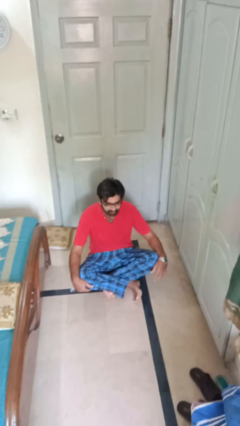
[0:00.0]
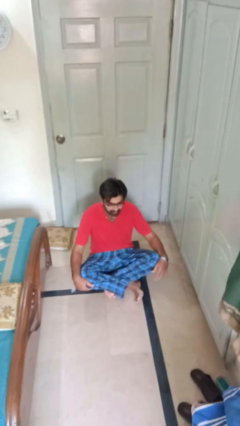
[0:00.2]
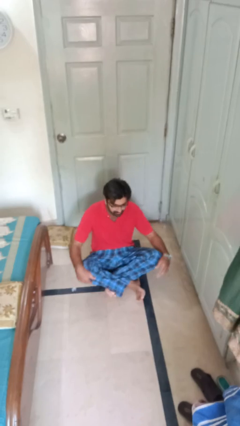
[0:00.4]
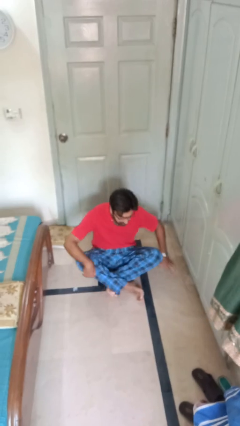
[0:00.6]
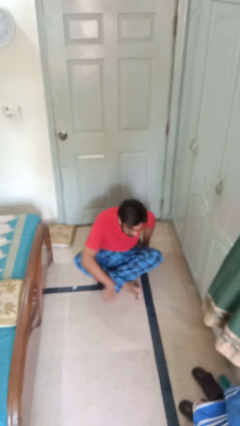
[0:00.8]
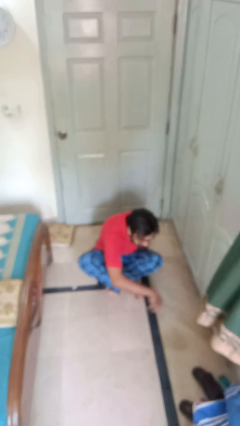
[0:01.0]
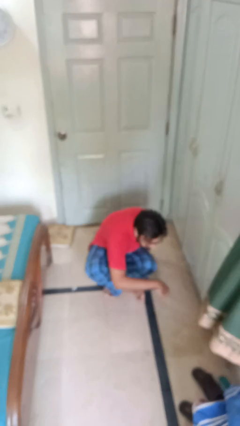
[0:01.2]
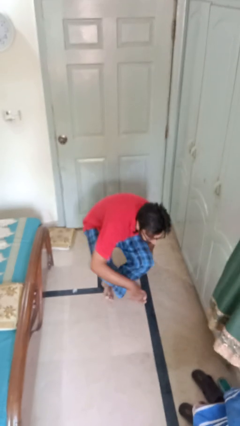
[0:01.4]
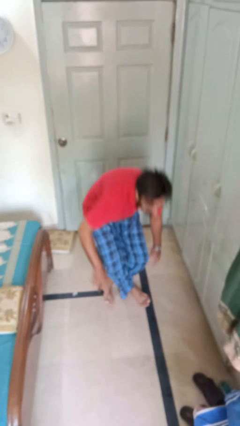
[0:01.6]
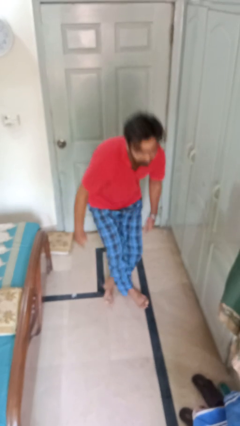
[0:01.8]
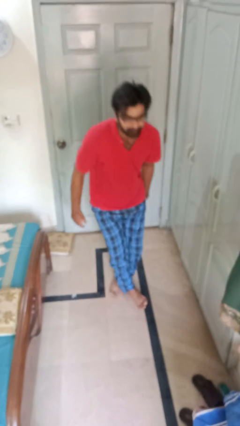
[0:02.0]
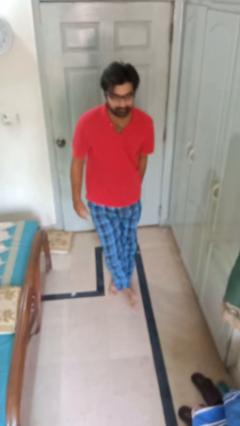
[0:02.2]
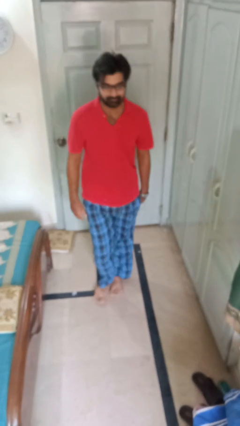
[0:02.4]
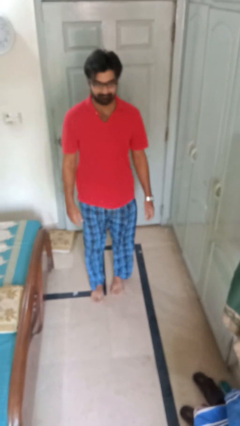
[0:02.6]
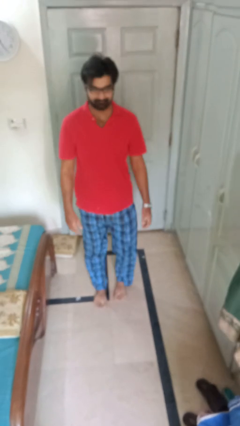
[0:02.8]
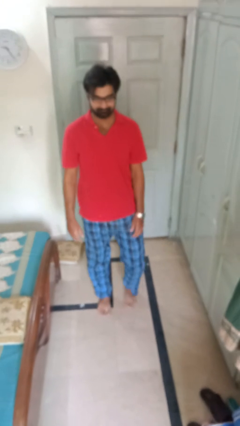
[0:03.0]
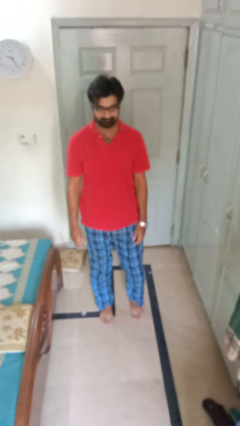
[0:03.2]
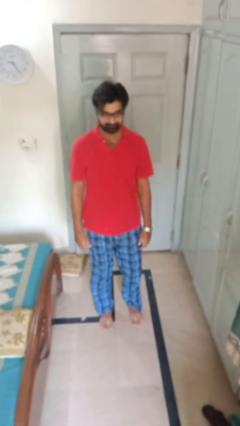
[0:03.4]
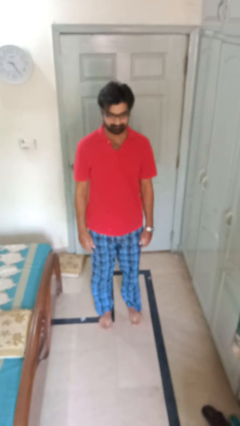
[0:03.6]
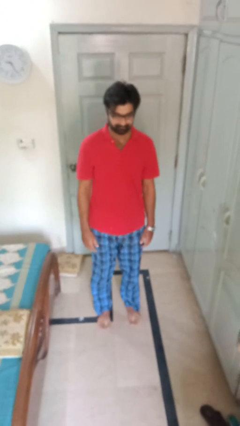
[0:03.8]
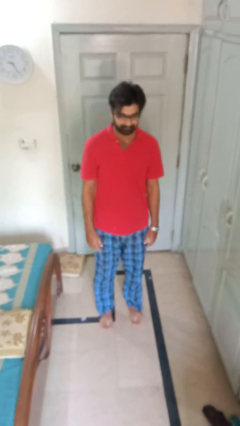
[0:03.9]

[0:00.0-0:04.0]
person stands up from floor

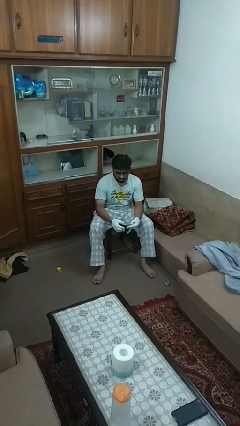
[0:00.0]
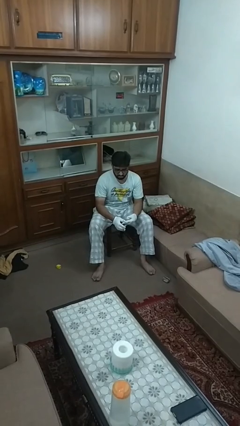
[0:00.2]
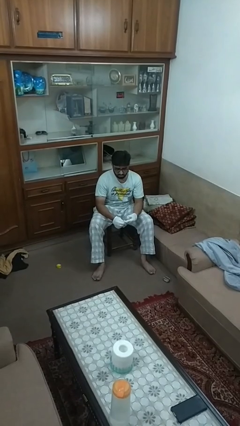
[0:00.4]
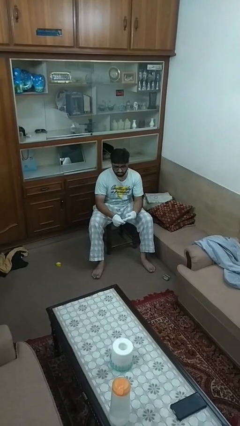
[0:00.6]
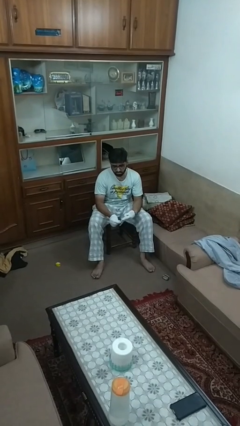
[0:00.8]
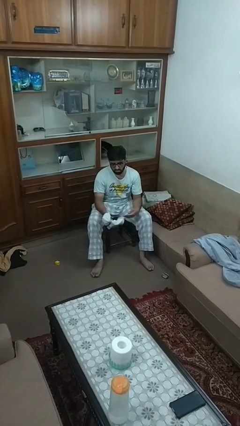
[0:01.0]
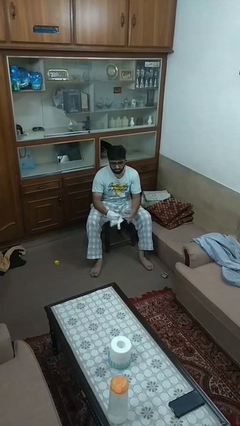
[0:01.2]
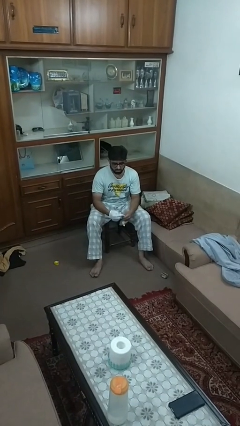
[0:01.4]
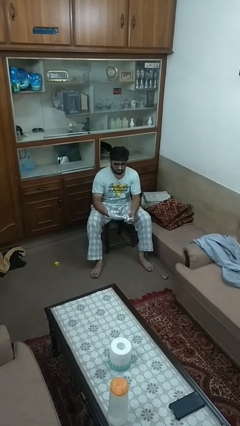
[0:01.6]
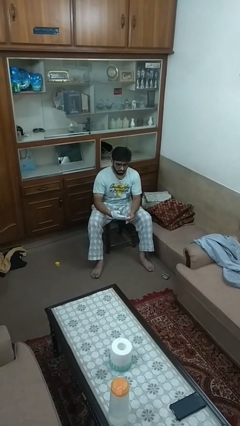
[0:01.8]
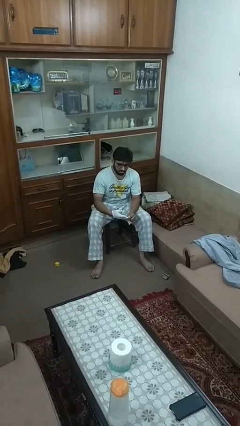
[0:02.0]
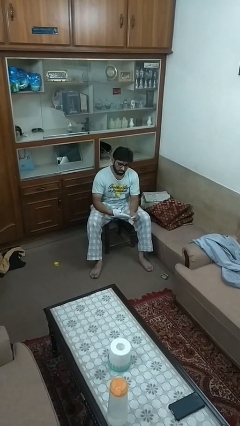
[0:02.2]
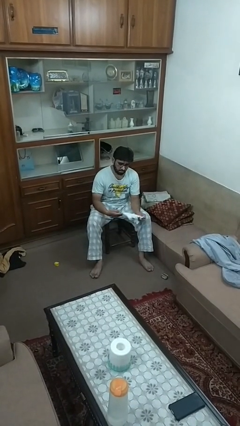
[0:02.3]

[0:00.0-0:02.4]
person takes off gloves

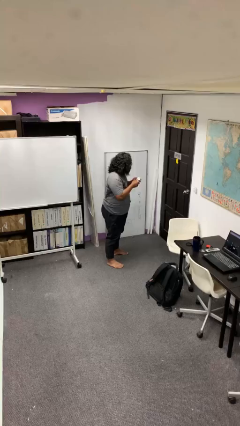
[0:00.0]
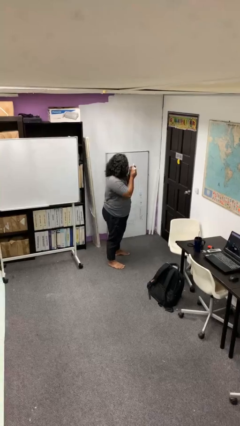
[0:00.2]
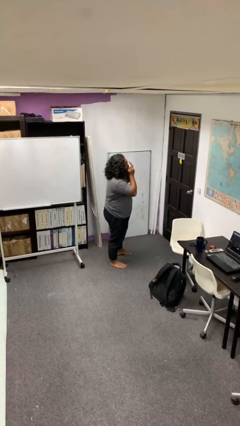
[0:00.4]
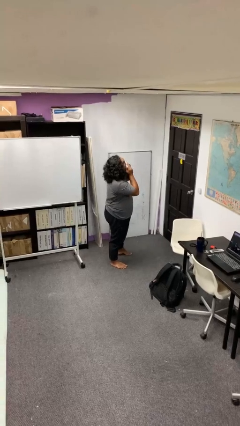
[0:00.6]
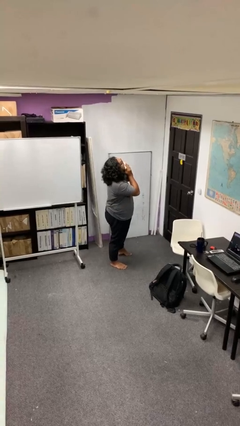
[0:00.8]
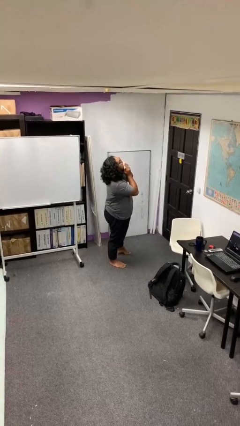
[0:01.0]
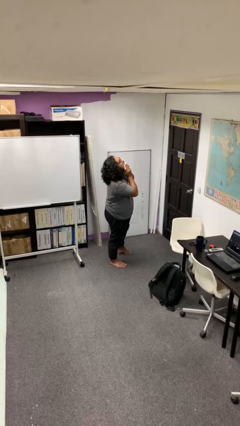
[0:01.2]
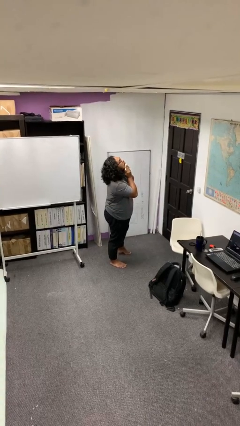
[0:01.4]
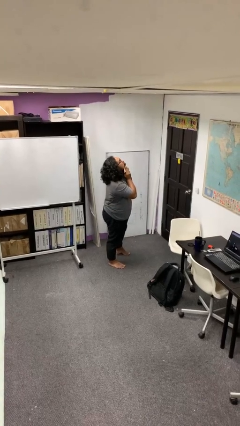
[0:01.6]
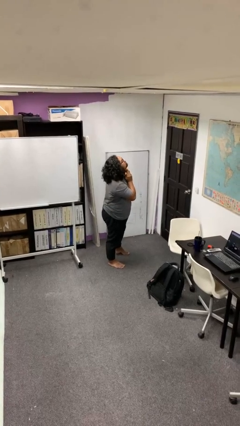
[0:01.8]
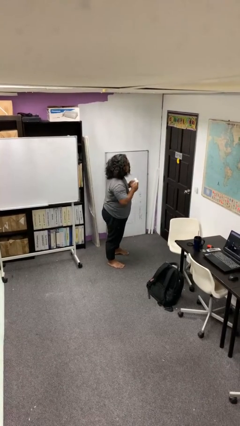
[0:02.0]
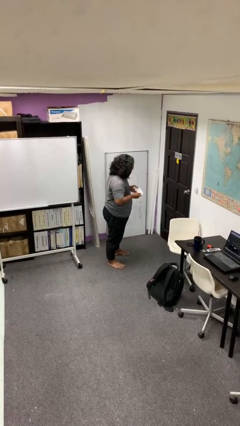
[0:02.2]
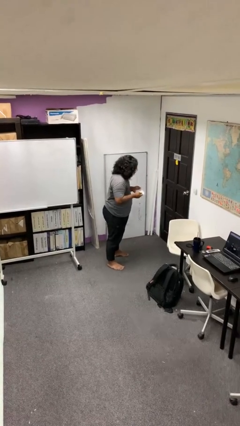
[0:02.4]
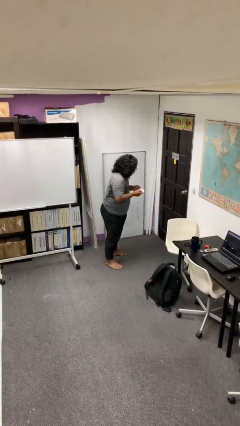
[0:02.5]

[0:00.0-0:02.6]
person wipes mouth with napkin

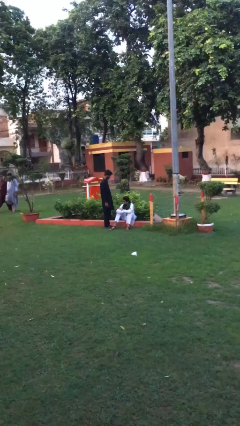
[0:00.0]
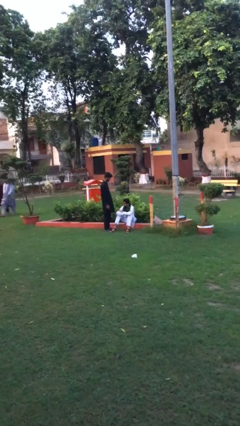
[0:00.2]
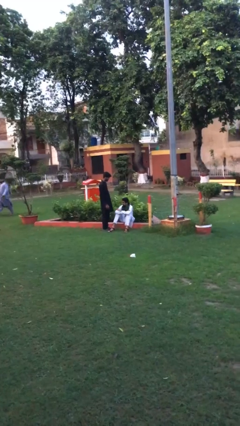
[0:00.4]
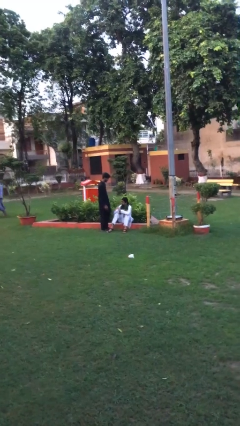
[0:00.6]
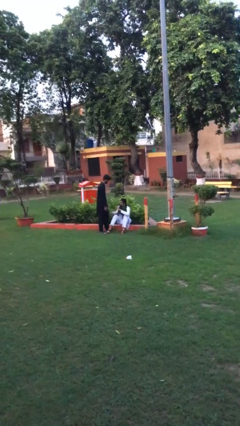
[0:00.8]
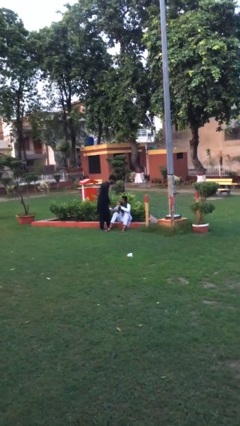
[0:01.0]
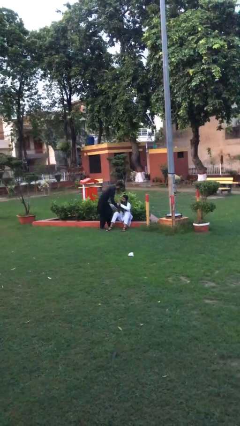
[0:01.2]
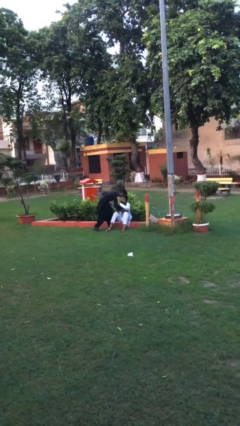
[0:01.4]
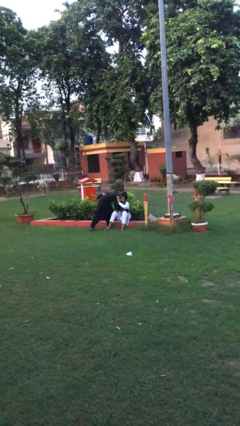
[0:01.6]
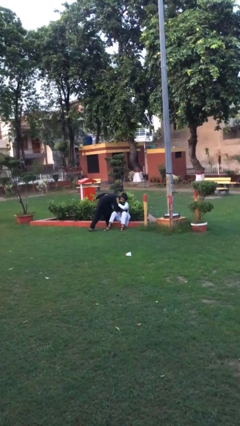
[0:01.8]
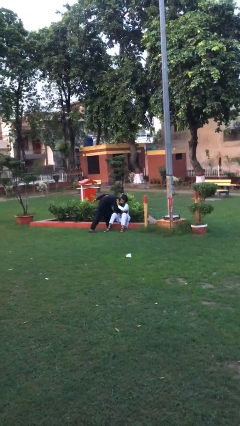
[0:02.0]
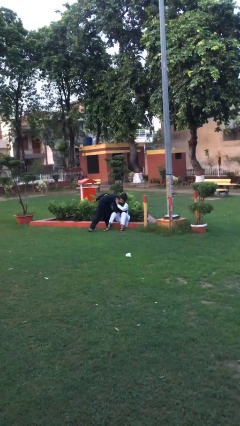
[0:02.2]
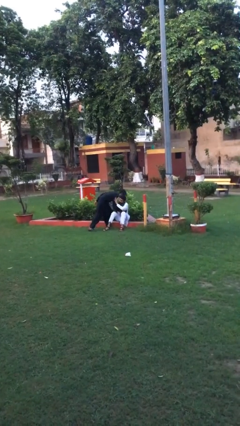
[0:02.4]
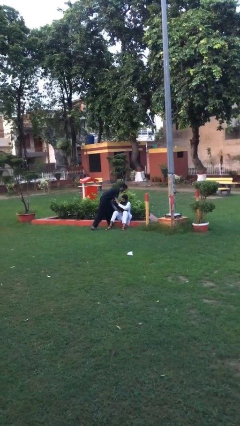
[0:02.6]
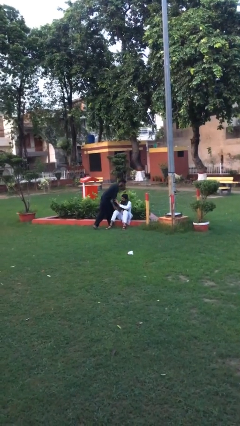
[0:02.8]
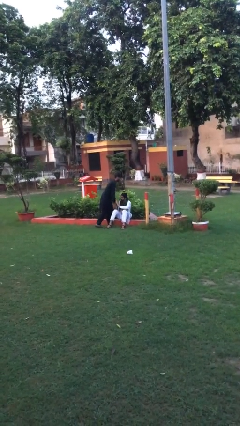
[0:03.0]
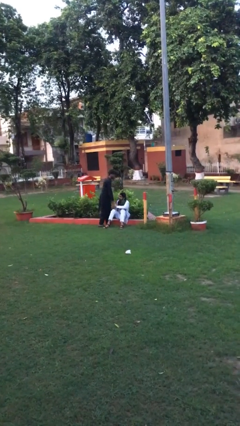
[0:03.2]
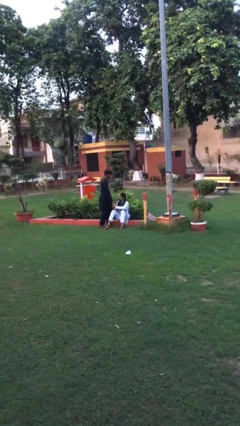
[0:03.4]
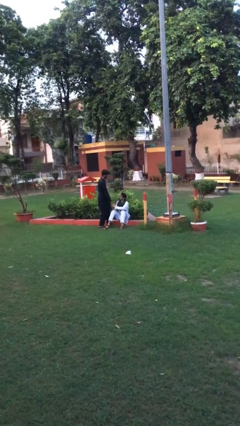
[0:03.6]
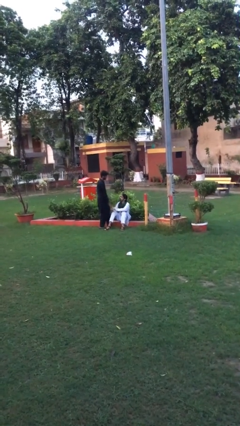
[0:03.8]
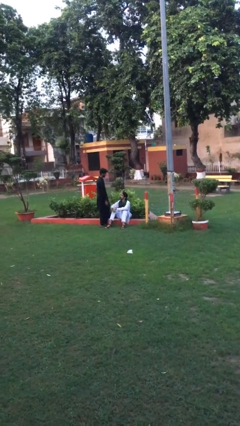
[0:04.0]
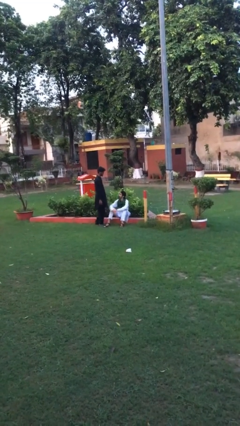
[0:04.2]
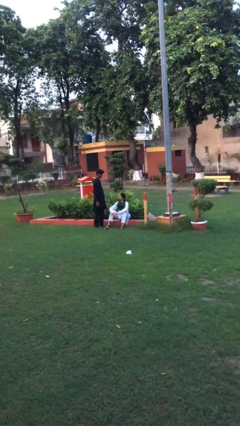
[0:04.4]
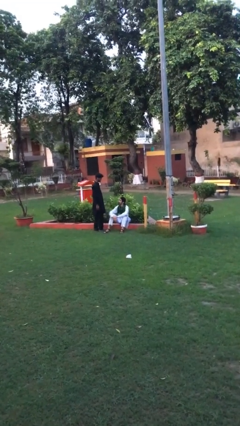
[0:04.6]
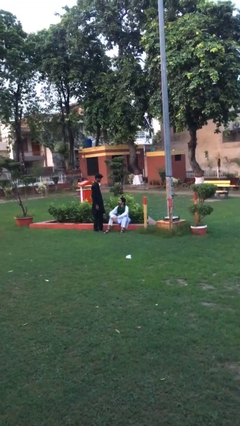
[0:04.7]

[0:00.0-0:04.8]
person embraces person

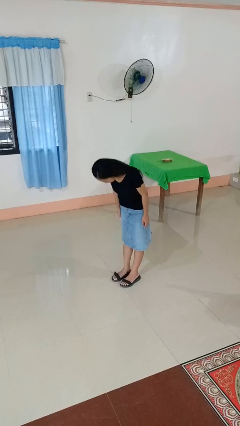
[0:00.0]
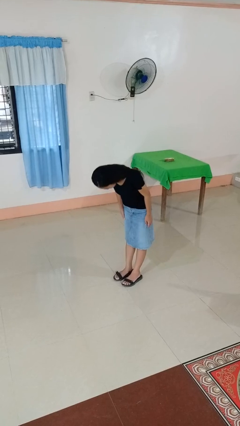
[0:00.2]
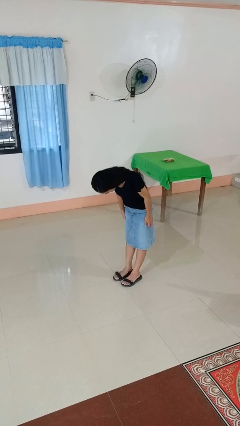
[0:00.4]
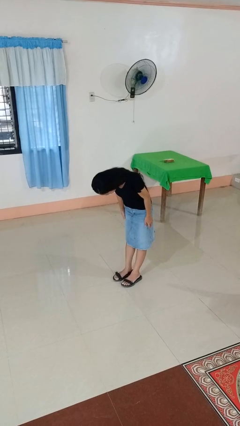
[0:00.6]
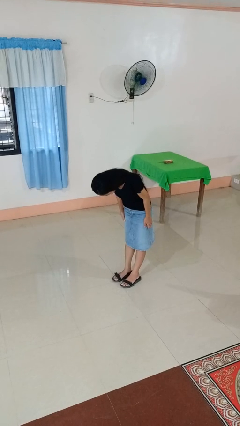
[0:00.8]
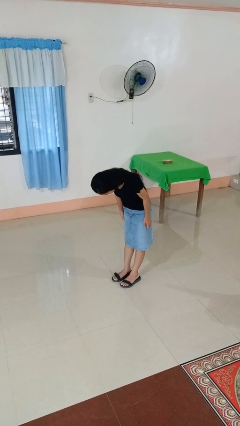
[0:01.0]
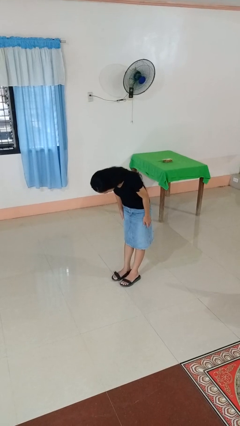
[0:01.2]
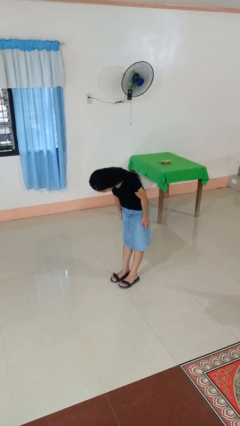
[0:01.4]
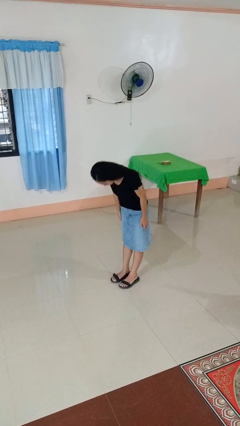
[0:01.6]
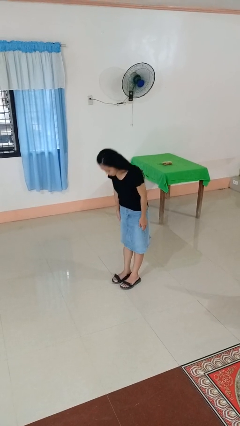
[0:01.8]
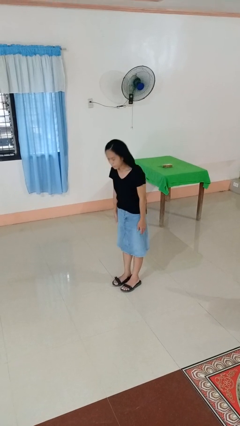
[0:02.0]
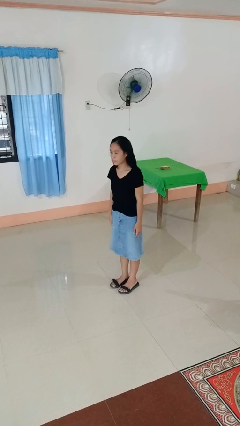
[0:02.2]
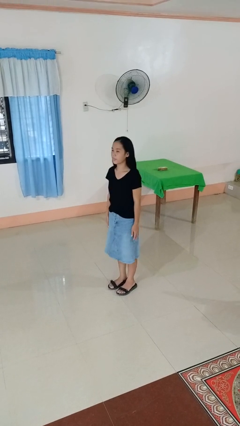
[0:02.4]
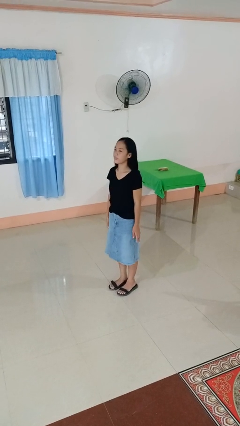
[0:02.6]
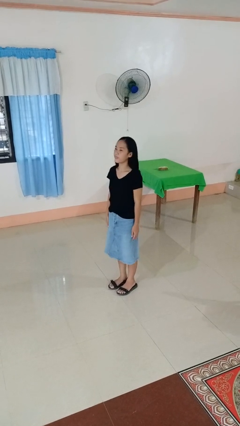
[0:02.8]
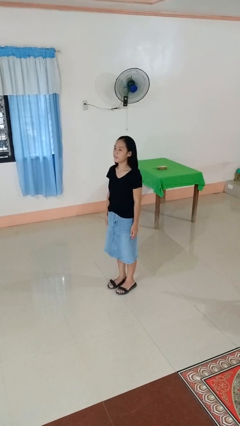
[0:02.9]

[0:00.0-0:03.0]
person bows

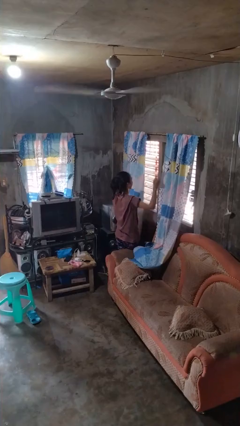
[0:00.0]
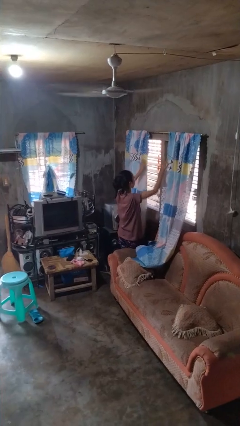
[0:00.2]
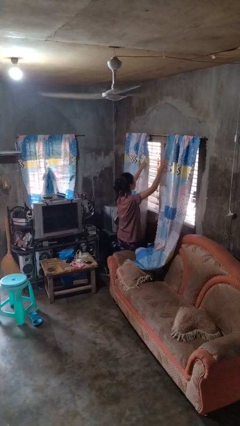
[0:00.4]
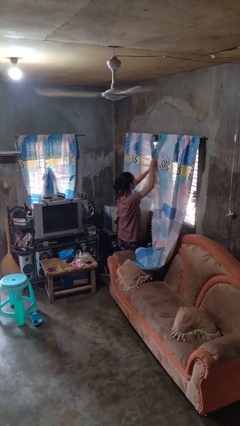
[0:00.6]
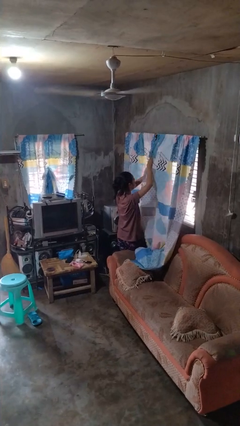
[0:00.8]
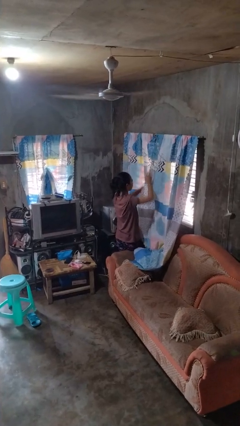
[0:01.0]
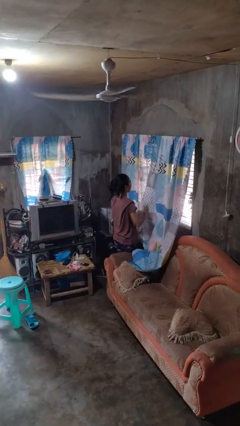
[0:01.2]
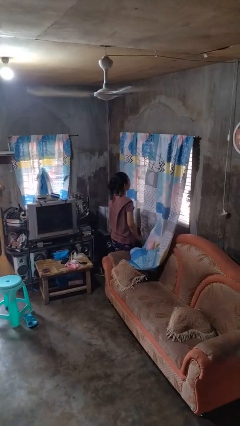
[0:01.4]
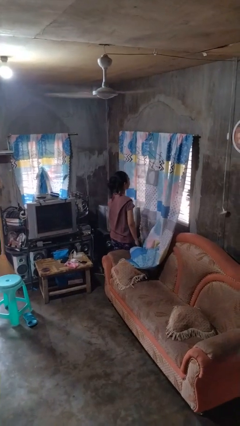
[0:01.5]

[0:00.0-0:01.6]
person closes curtains
